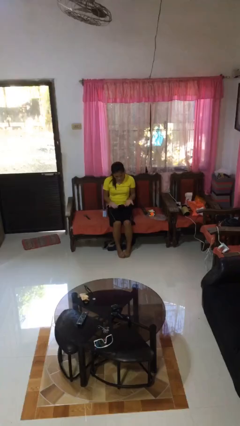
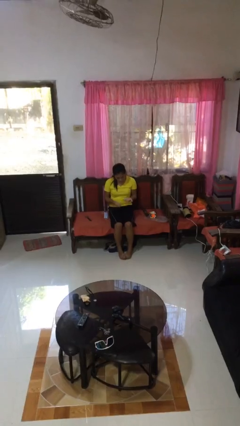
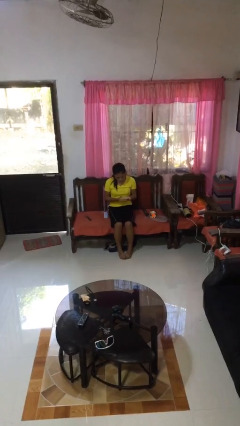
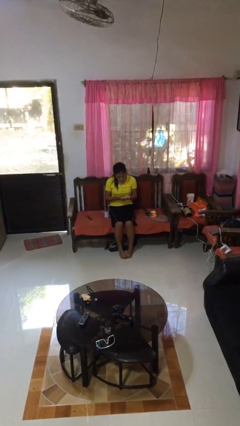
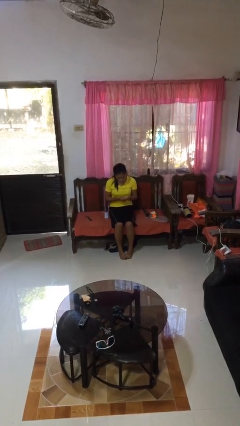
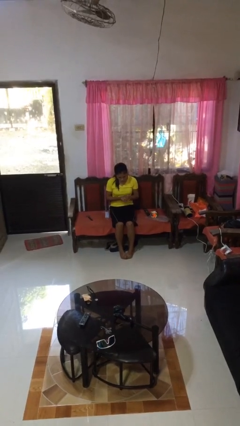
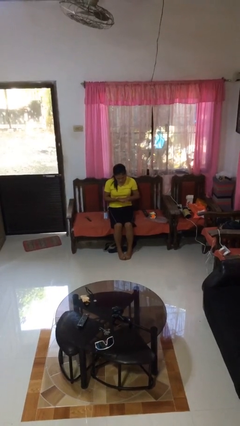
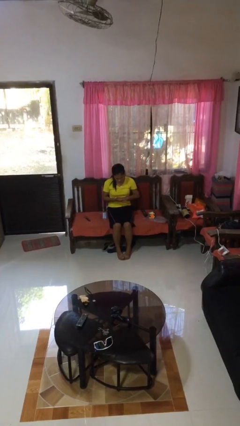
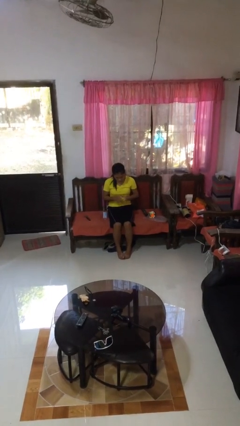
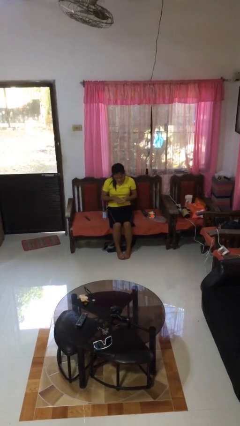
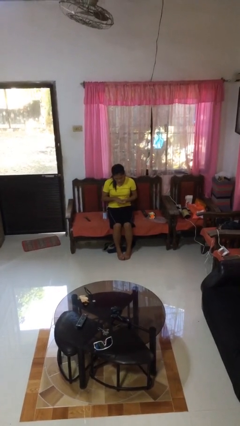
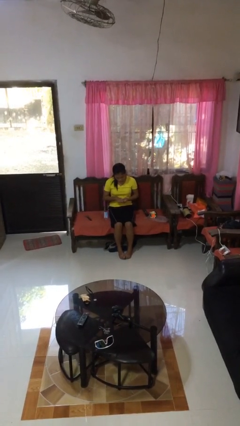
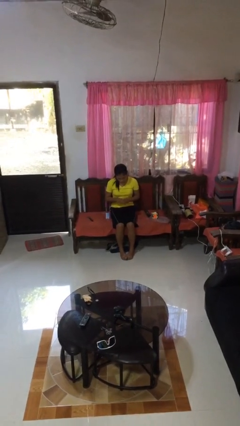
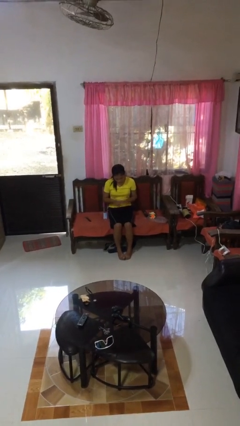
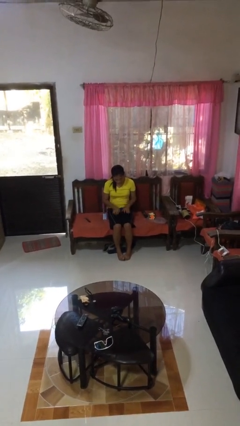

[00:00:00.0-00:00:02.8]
person looks at hands in lap

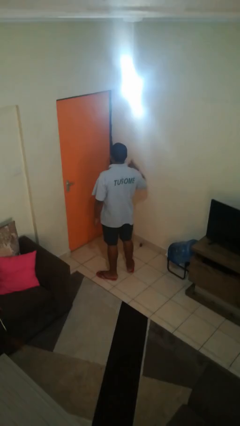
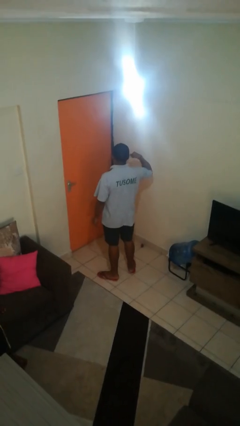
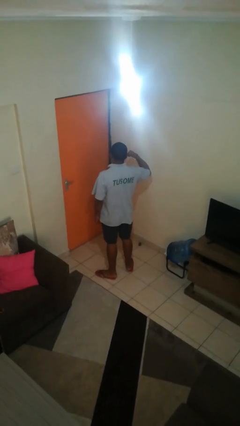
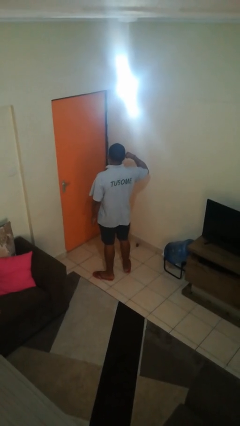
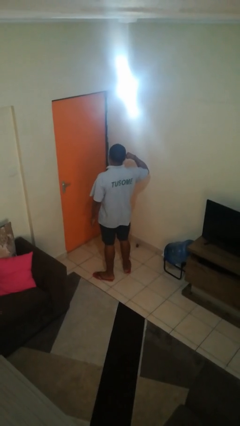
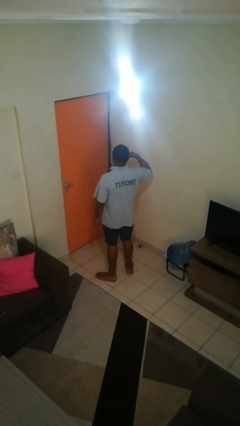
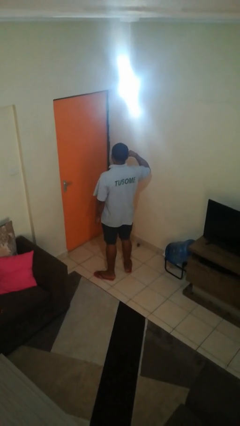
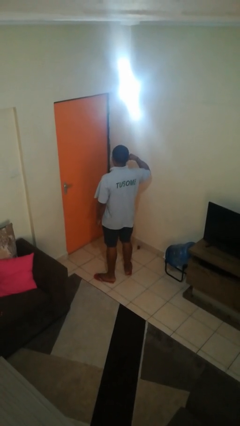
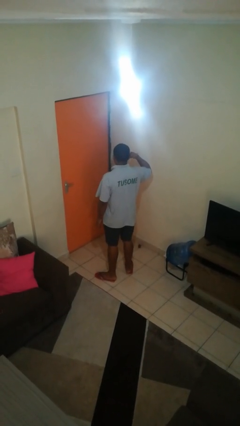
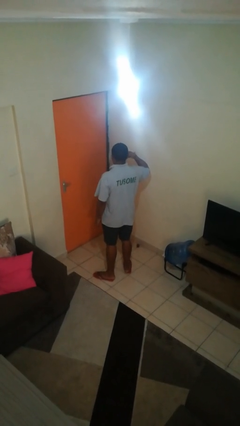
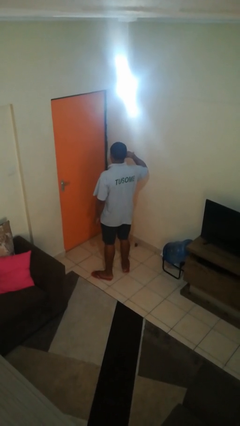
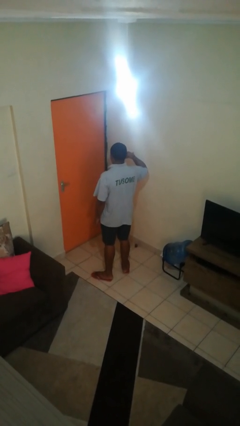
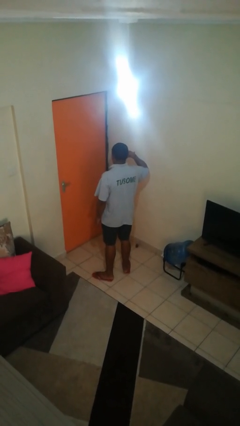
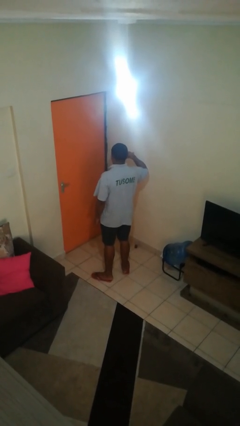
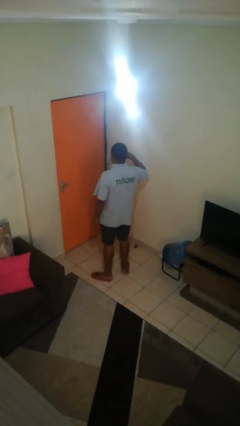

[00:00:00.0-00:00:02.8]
person gestures call me

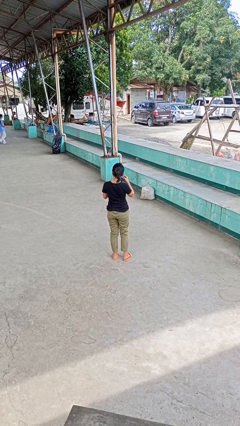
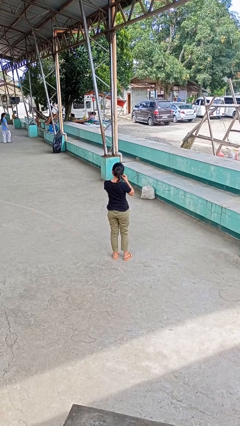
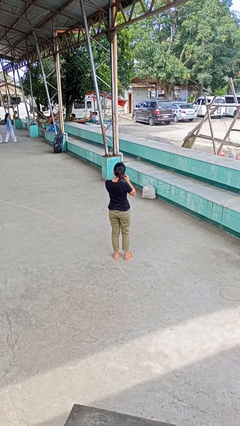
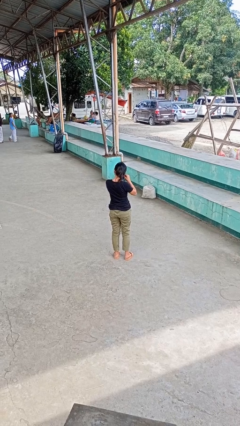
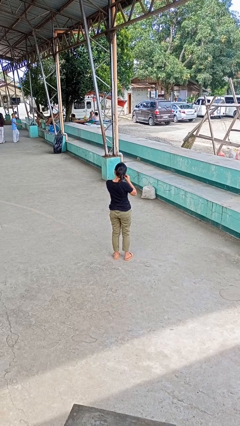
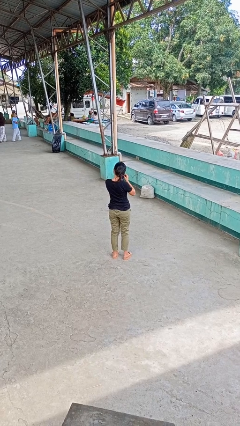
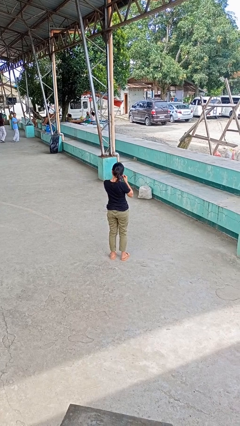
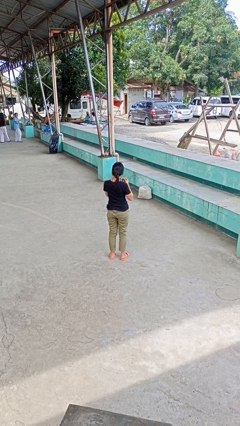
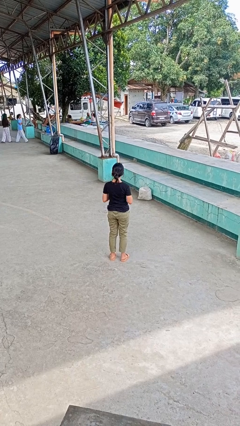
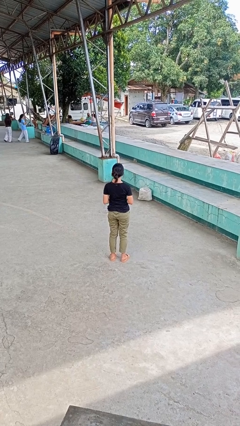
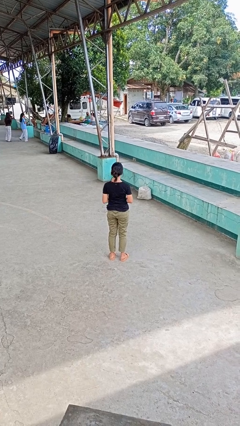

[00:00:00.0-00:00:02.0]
person takes off earrings

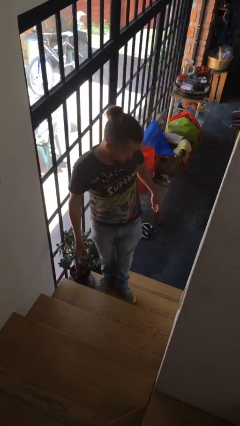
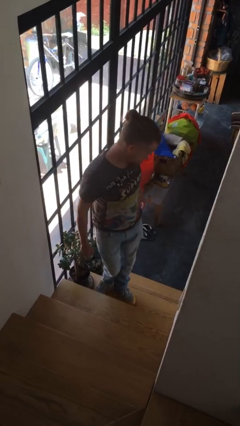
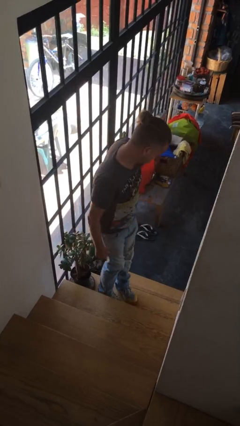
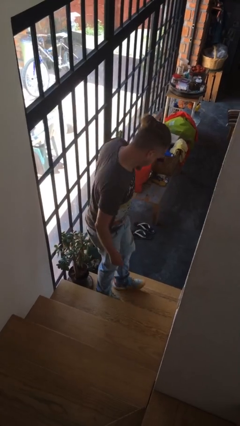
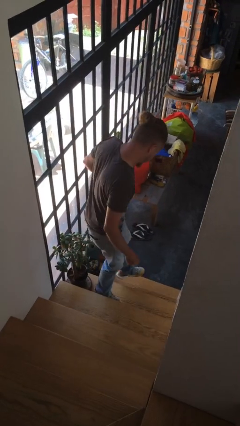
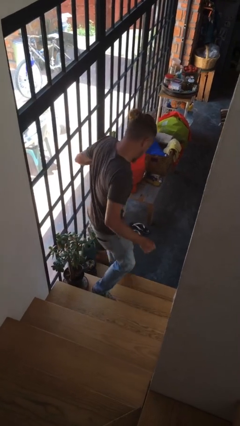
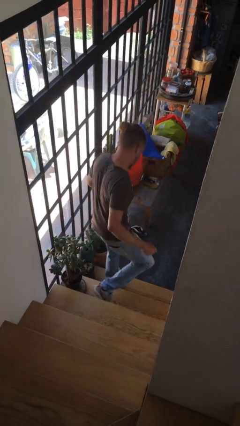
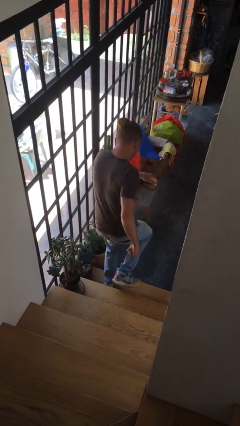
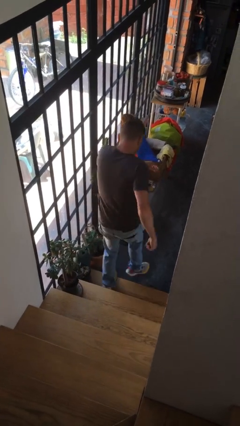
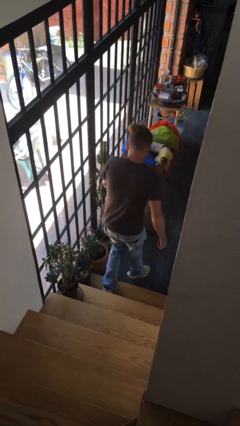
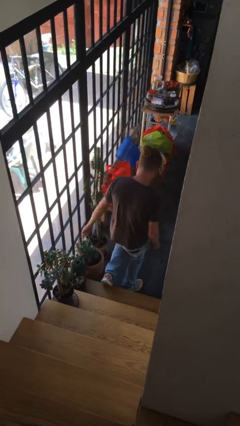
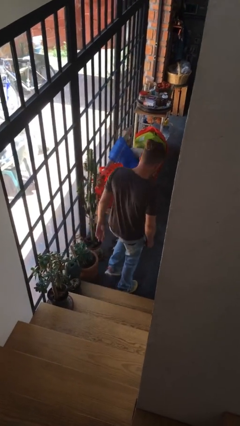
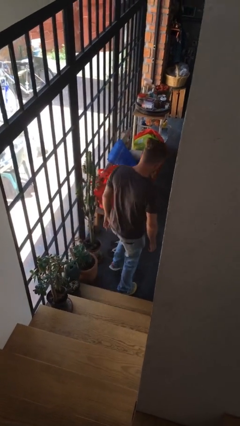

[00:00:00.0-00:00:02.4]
person climbs down stairs

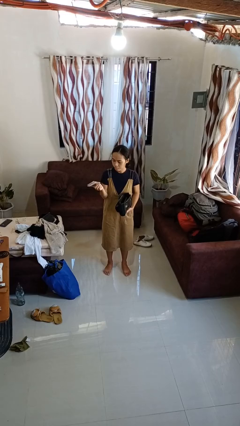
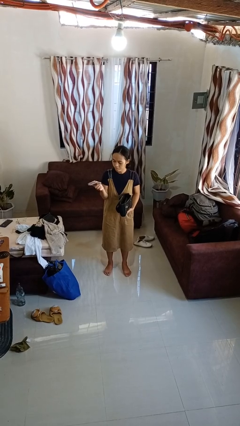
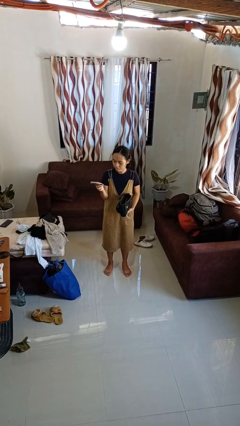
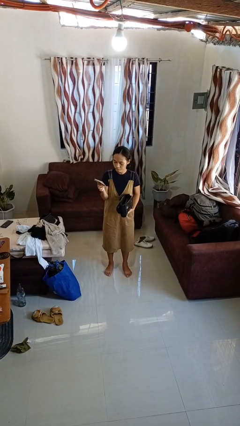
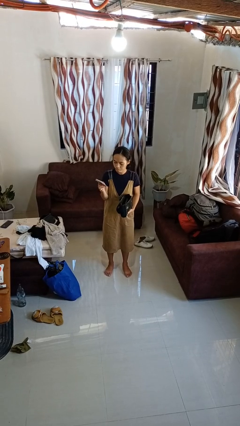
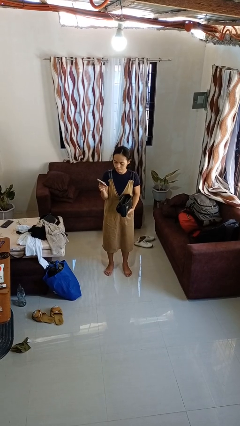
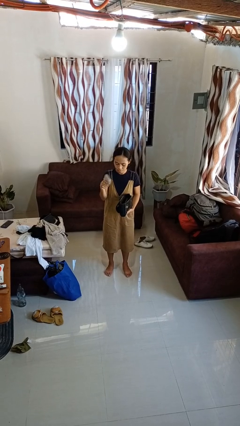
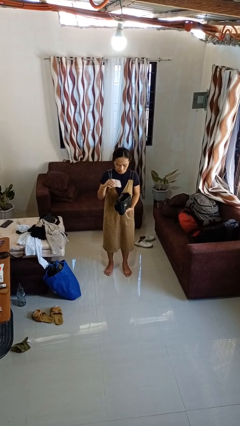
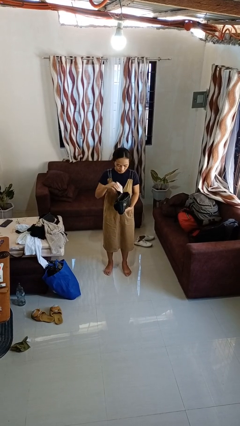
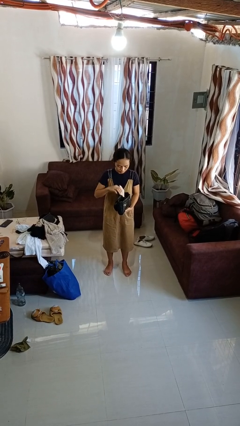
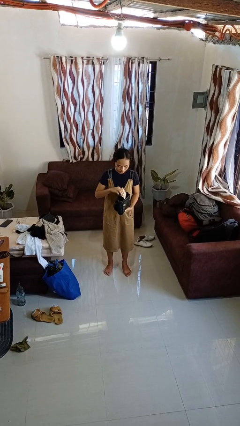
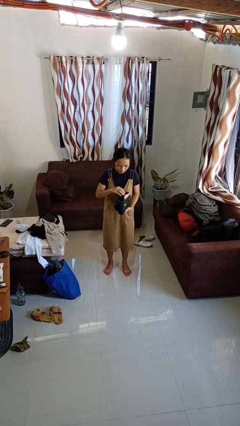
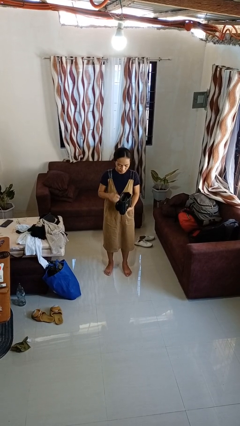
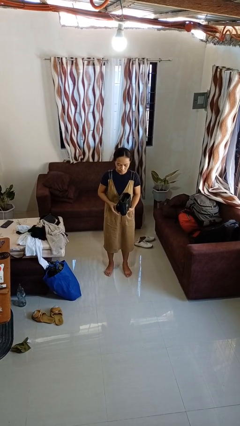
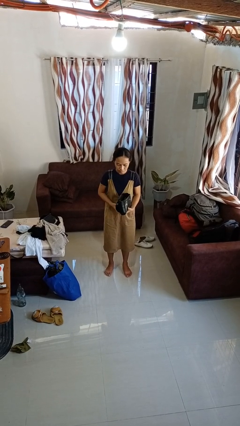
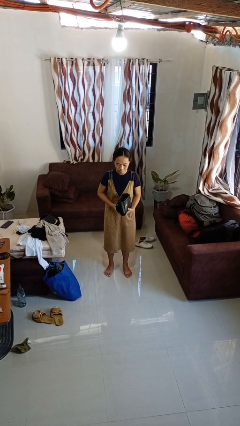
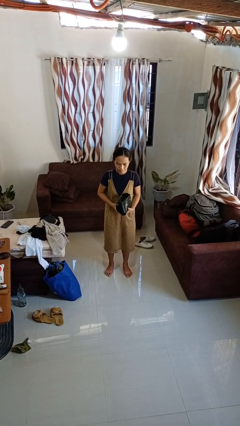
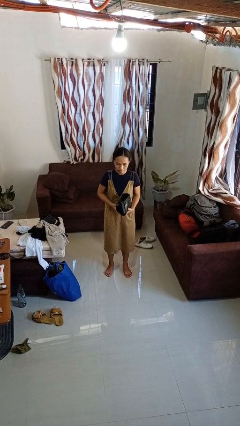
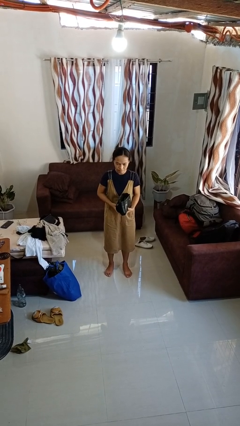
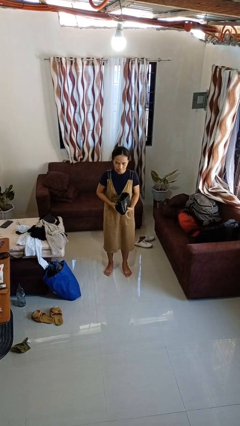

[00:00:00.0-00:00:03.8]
person puts object into purse

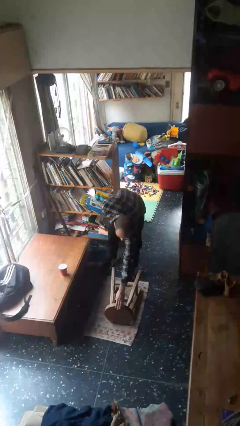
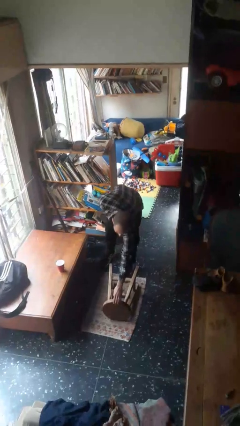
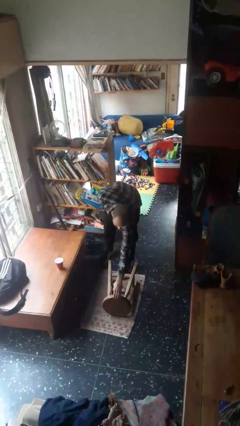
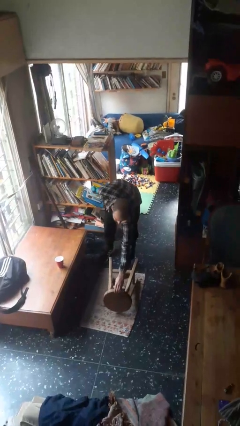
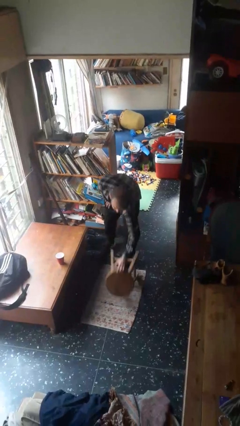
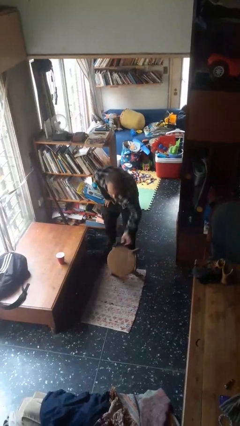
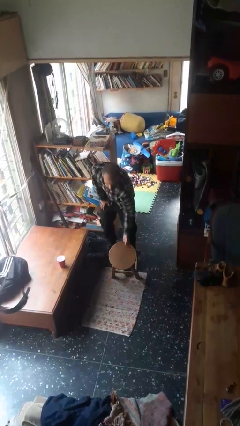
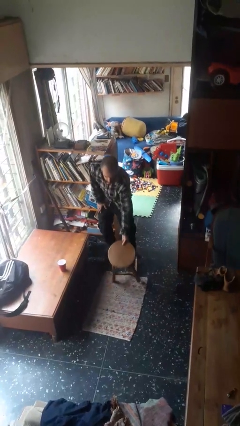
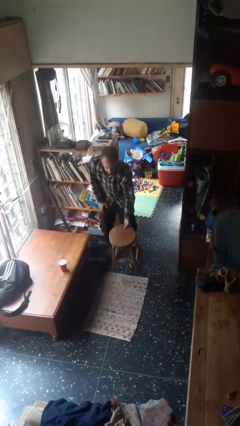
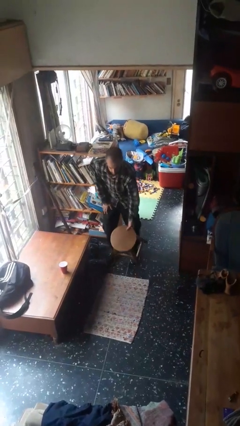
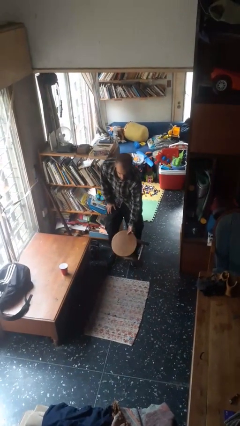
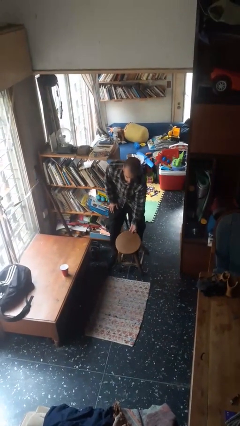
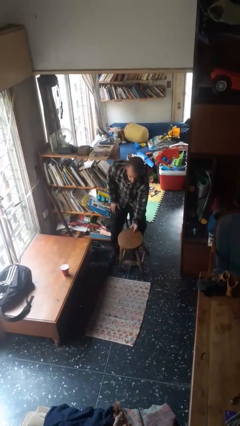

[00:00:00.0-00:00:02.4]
person sets upright furniture

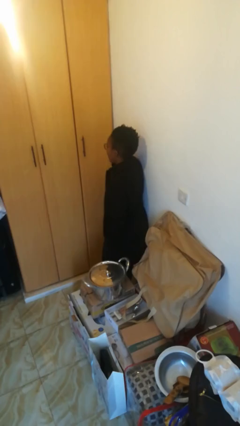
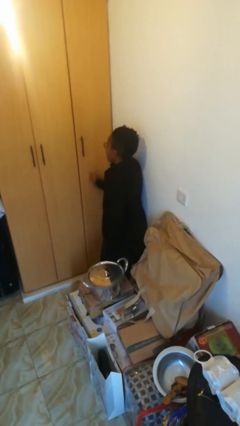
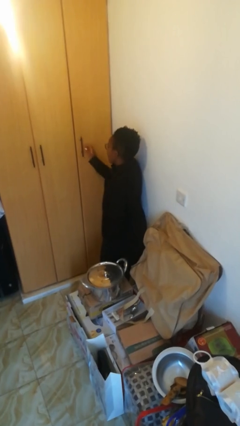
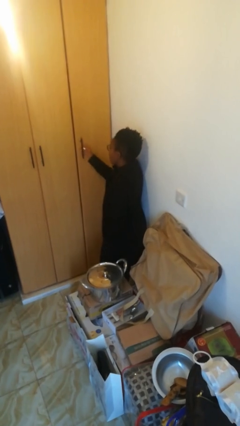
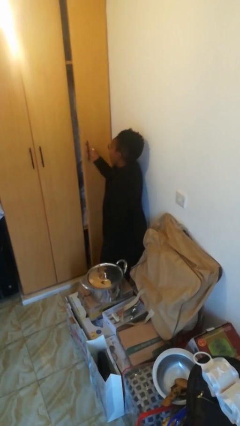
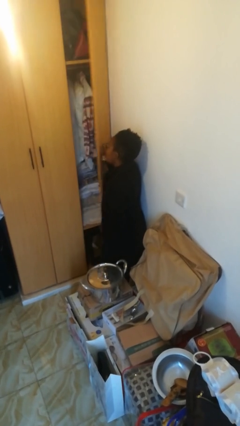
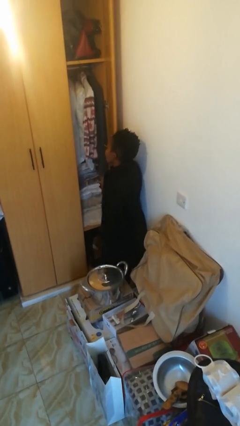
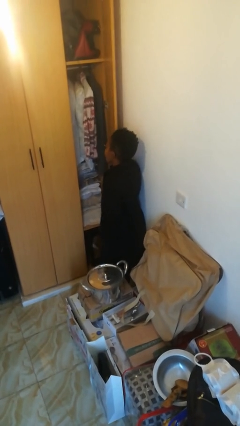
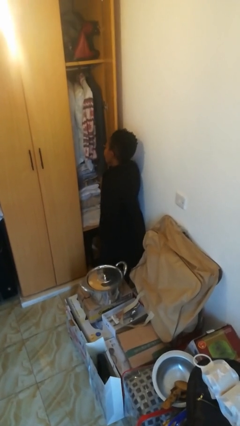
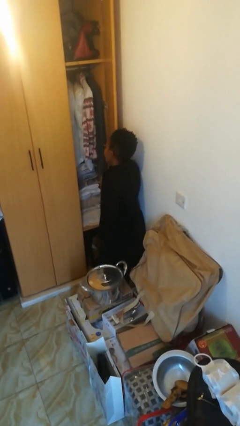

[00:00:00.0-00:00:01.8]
person opens closet door
